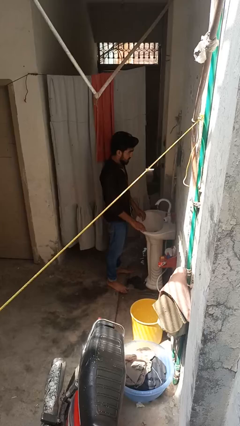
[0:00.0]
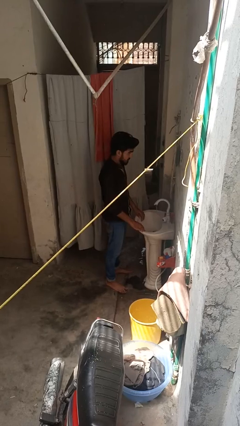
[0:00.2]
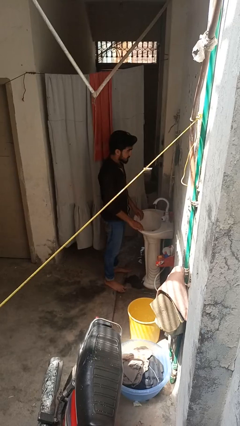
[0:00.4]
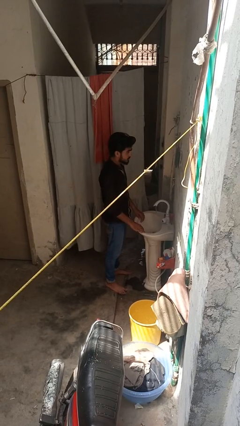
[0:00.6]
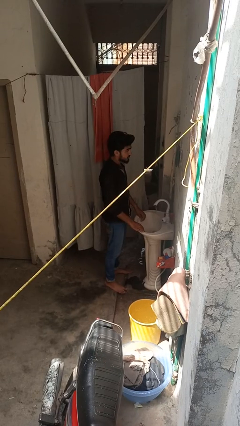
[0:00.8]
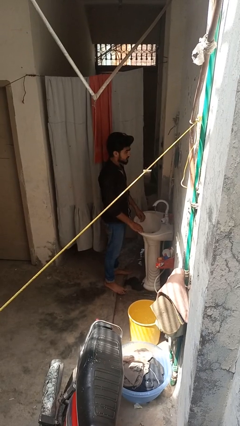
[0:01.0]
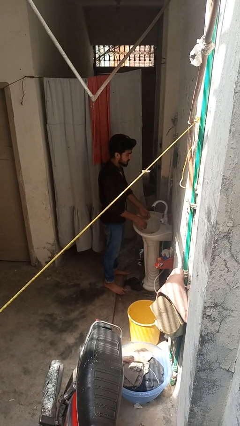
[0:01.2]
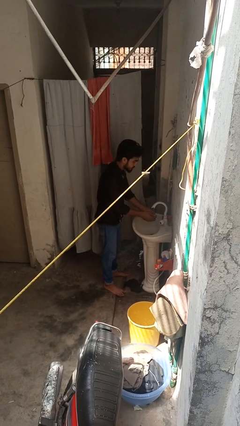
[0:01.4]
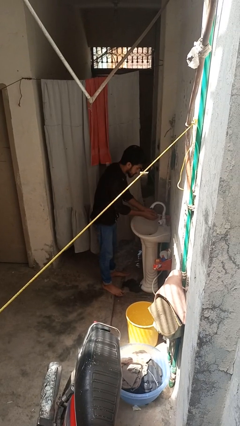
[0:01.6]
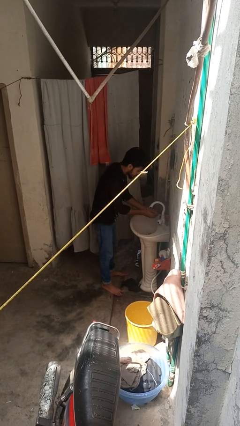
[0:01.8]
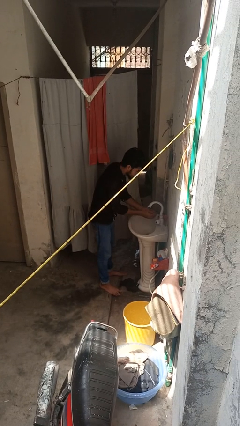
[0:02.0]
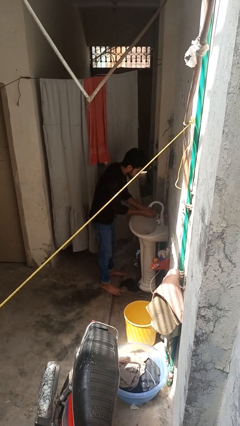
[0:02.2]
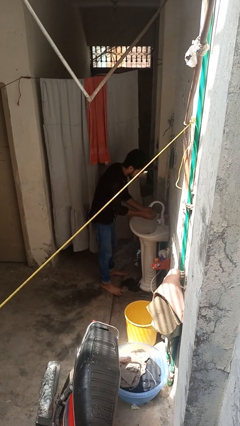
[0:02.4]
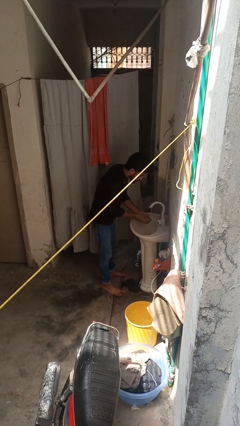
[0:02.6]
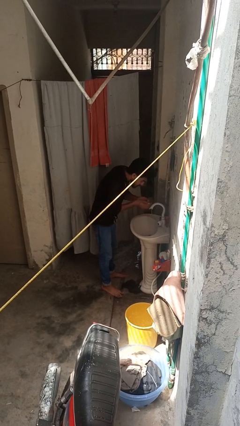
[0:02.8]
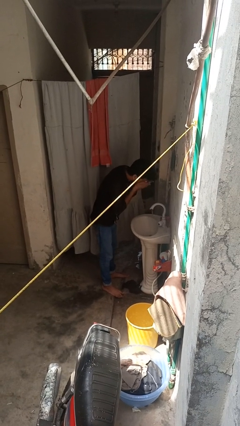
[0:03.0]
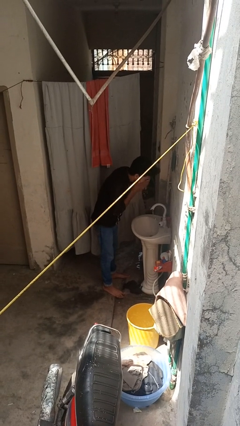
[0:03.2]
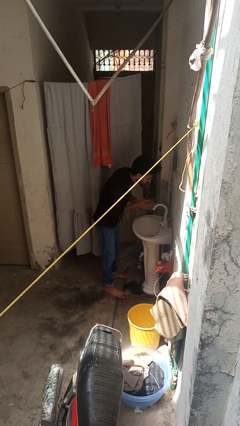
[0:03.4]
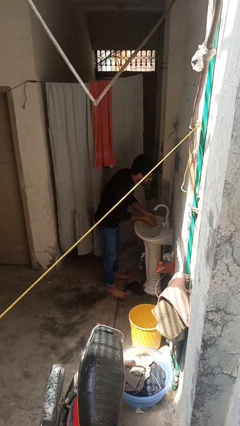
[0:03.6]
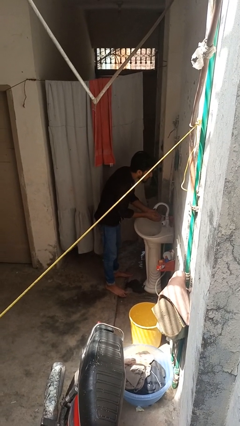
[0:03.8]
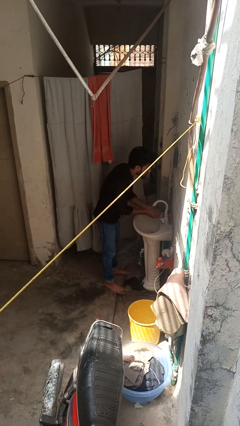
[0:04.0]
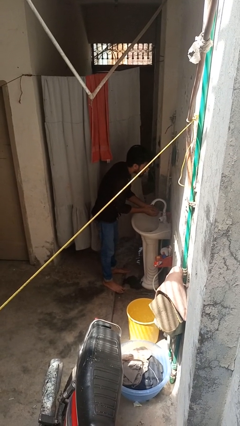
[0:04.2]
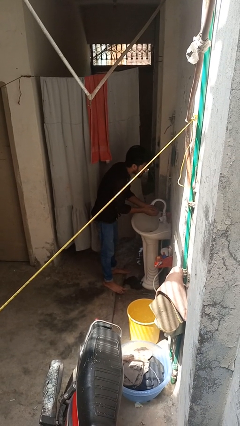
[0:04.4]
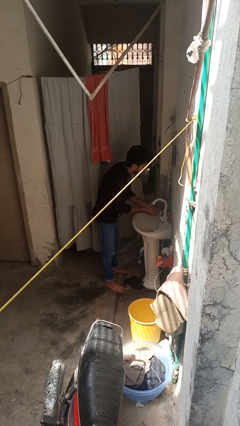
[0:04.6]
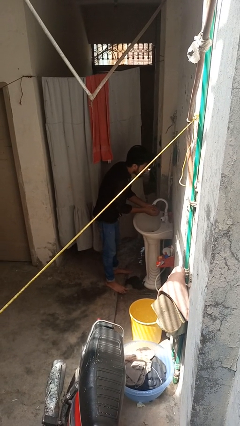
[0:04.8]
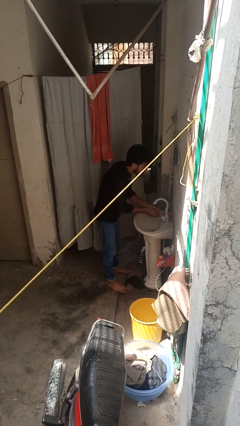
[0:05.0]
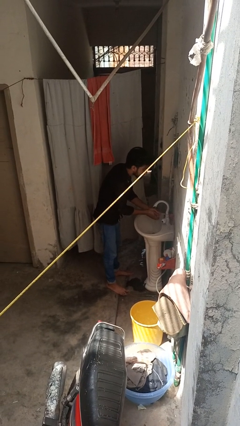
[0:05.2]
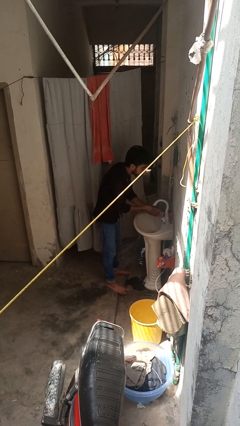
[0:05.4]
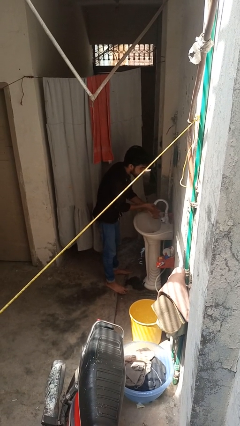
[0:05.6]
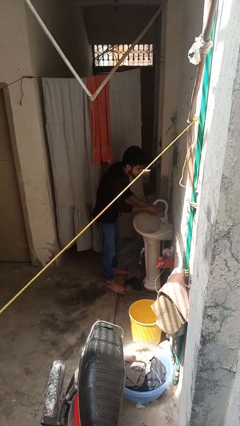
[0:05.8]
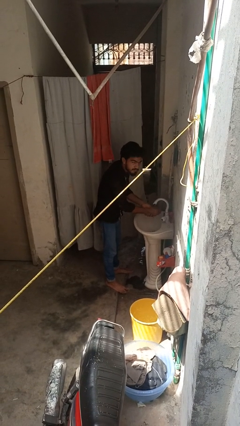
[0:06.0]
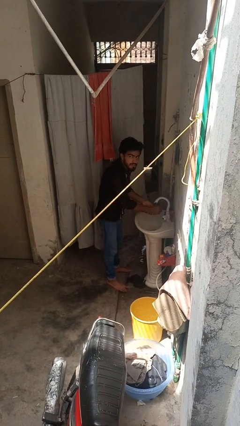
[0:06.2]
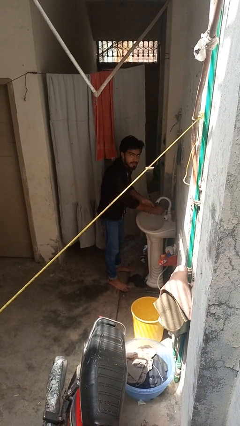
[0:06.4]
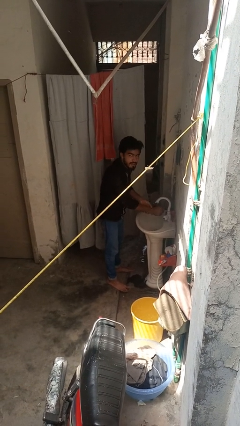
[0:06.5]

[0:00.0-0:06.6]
person washes hands

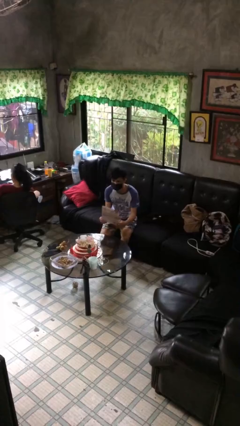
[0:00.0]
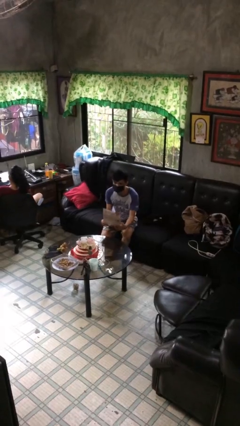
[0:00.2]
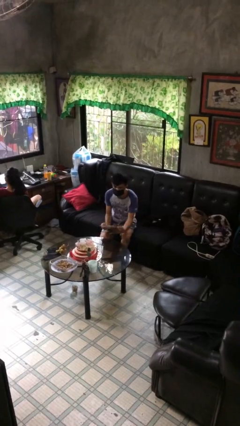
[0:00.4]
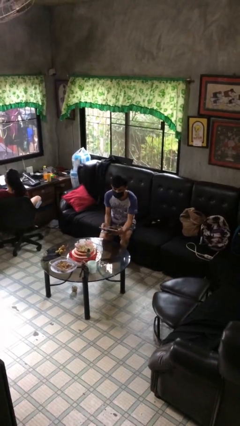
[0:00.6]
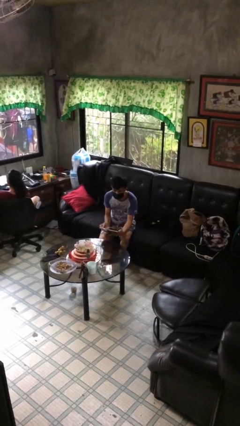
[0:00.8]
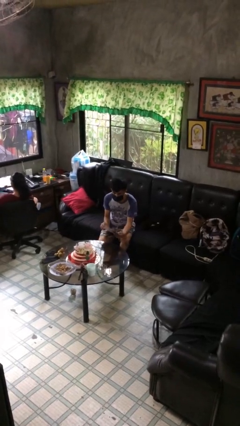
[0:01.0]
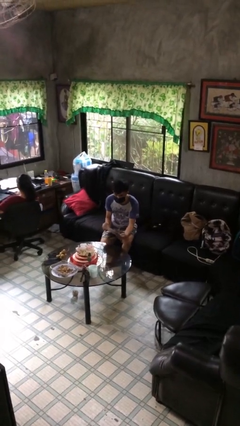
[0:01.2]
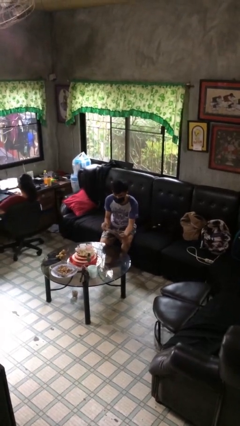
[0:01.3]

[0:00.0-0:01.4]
person picks up object from table

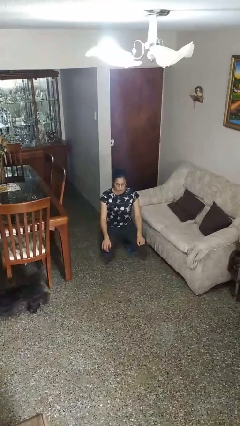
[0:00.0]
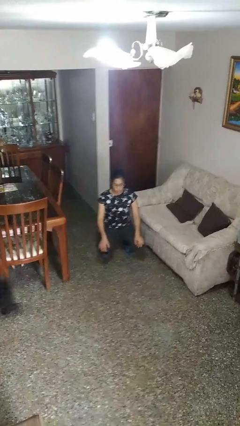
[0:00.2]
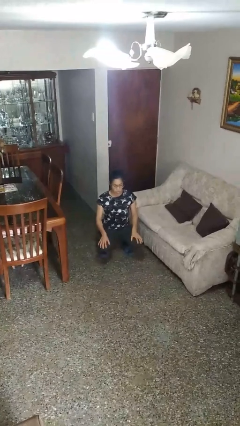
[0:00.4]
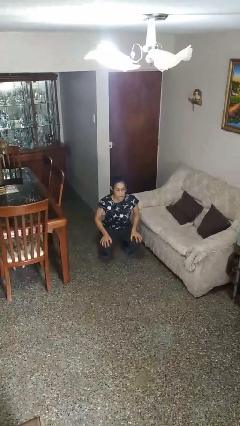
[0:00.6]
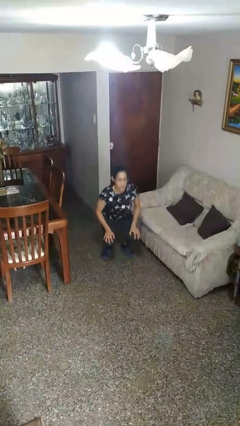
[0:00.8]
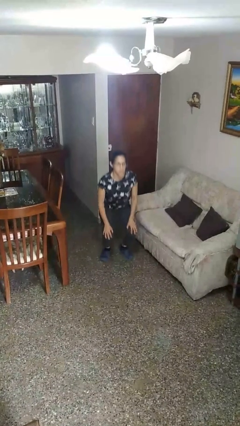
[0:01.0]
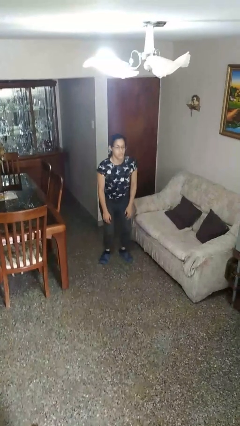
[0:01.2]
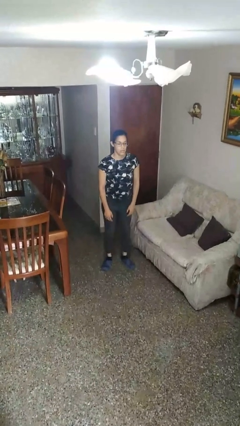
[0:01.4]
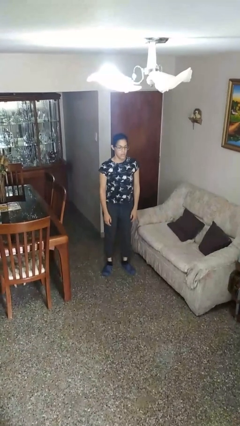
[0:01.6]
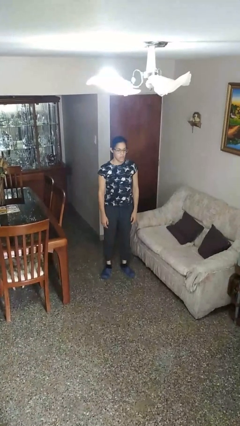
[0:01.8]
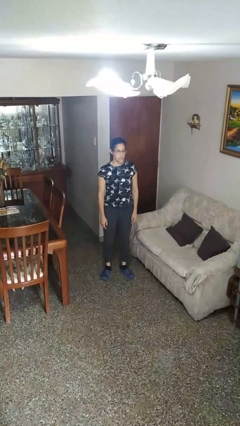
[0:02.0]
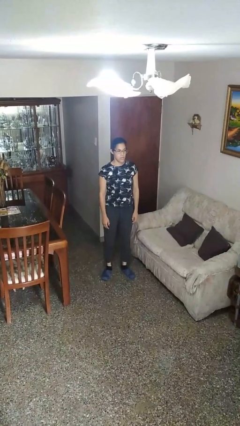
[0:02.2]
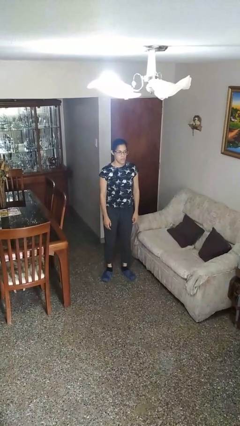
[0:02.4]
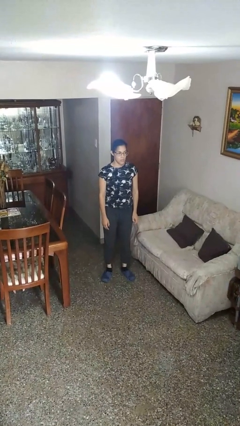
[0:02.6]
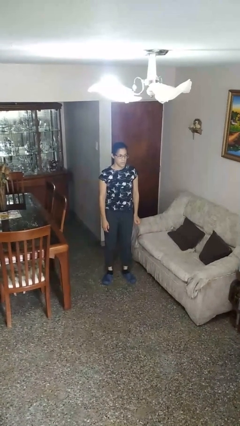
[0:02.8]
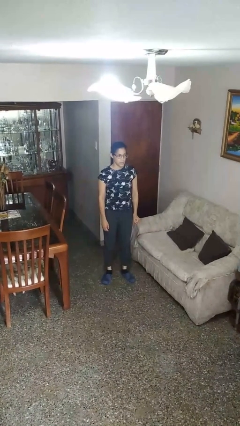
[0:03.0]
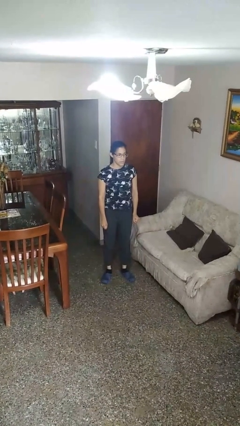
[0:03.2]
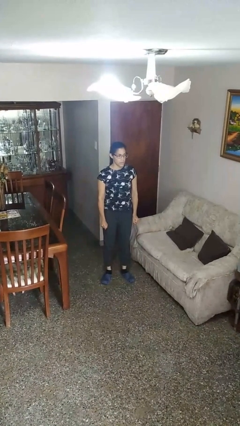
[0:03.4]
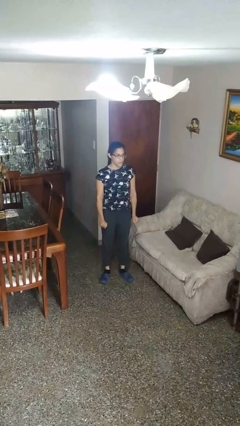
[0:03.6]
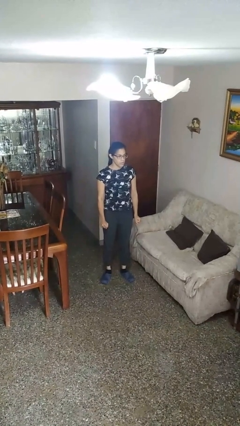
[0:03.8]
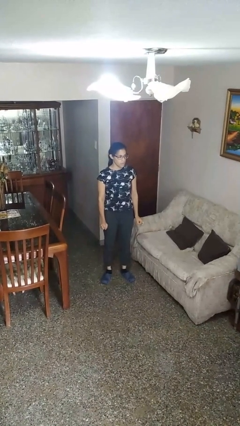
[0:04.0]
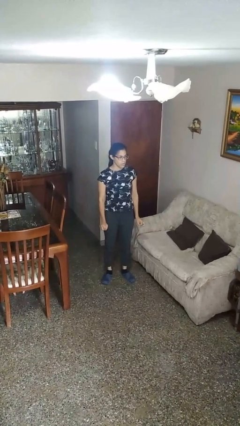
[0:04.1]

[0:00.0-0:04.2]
person stands up

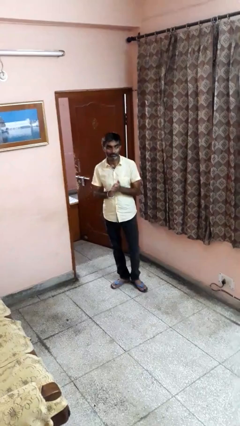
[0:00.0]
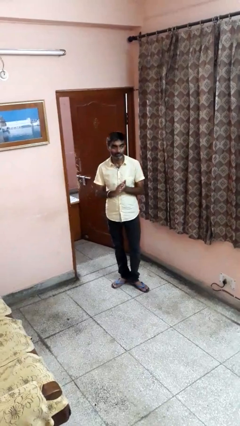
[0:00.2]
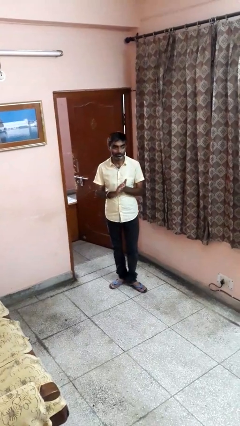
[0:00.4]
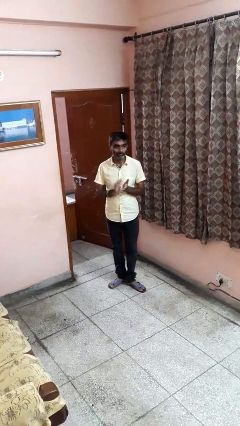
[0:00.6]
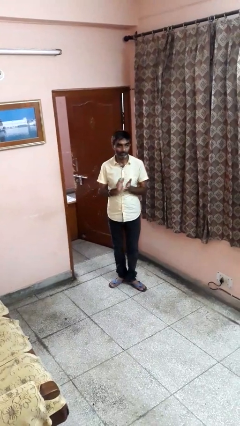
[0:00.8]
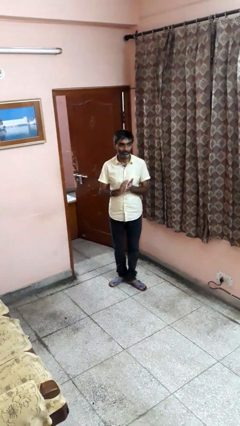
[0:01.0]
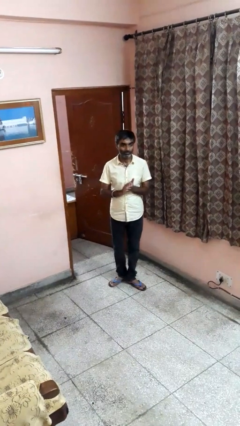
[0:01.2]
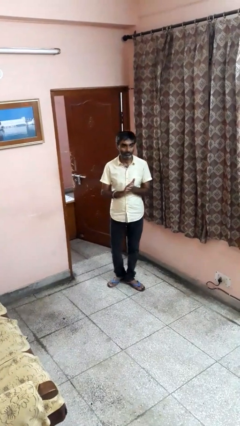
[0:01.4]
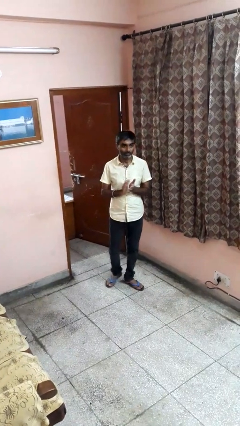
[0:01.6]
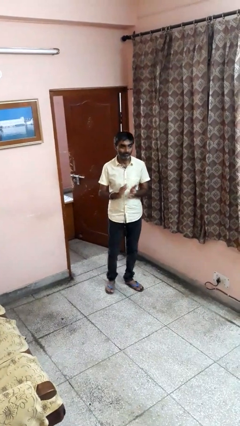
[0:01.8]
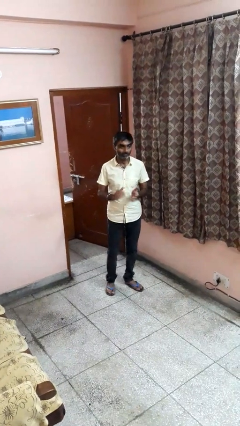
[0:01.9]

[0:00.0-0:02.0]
person claps hands

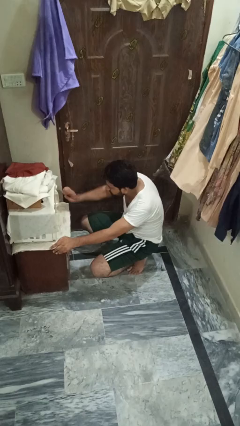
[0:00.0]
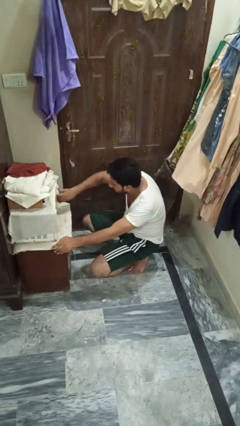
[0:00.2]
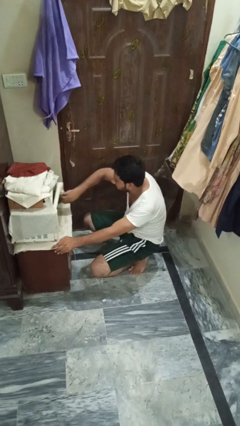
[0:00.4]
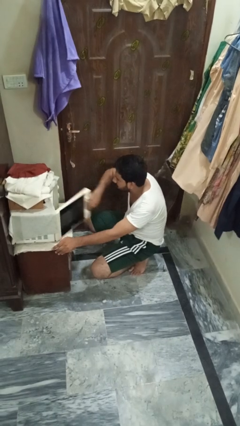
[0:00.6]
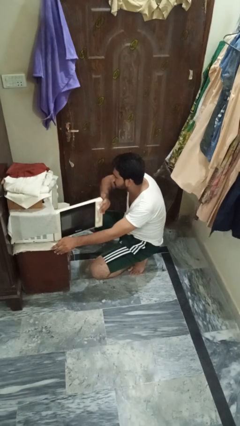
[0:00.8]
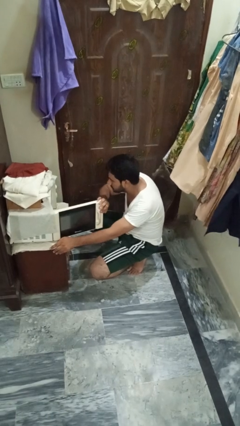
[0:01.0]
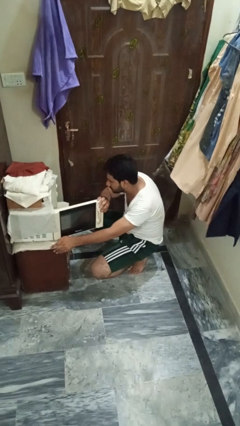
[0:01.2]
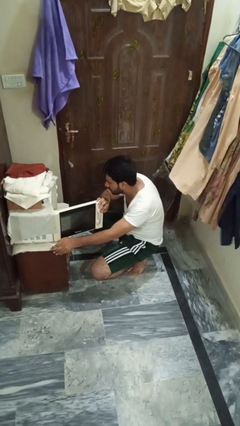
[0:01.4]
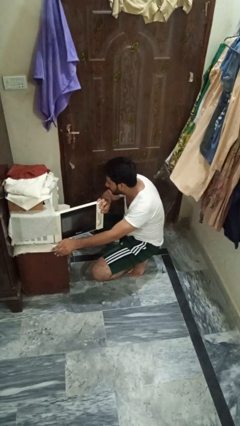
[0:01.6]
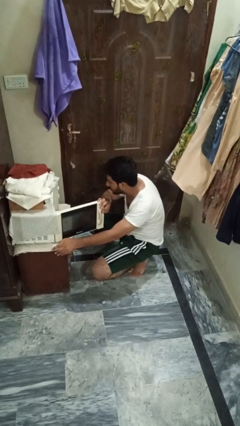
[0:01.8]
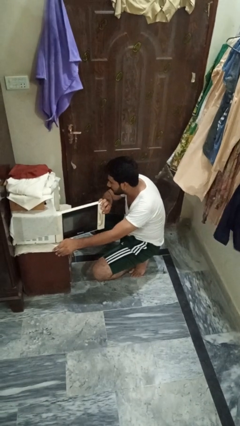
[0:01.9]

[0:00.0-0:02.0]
person opens oven door

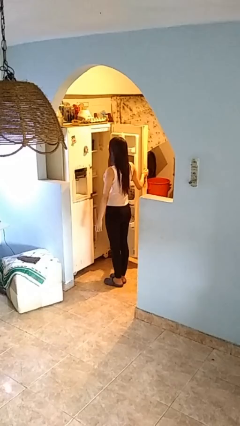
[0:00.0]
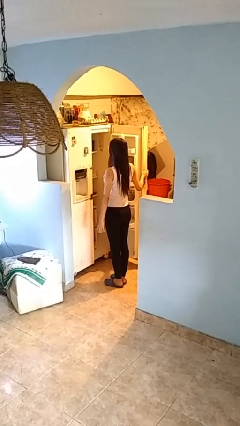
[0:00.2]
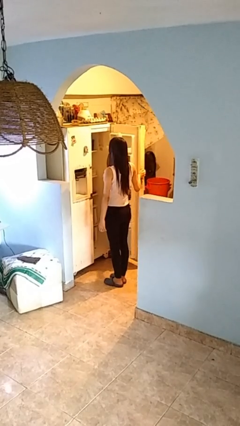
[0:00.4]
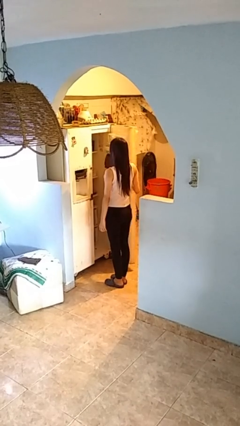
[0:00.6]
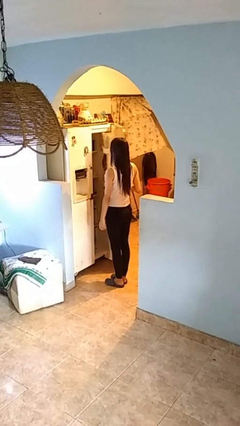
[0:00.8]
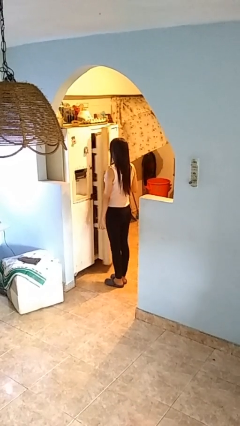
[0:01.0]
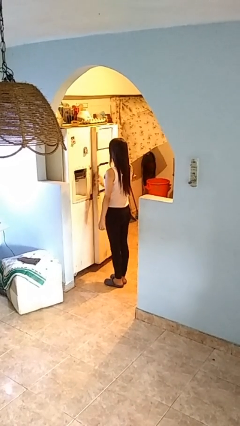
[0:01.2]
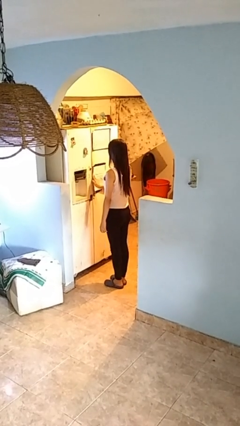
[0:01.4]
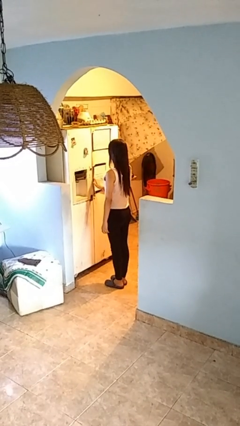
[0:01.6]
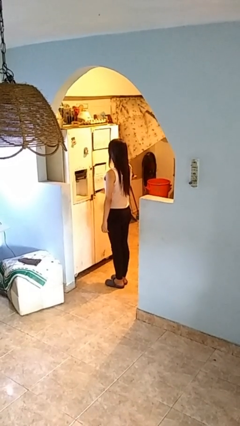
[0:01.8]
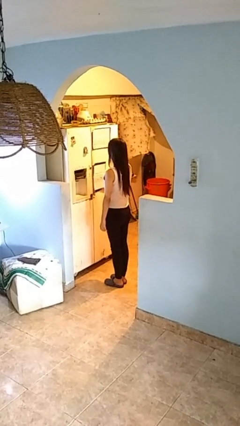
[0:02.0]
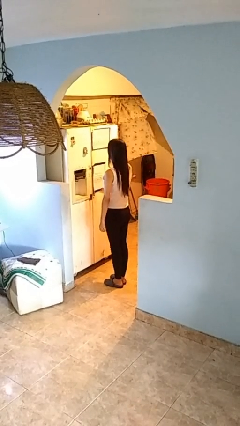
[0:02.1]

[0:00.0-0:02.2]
person closes refrigerator
